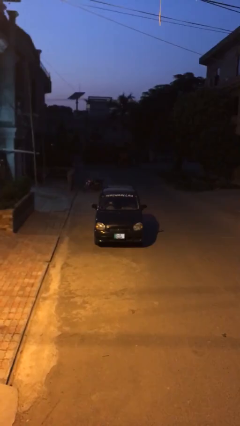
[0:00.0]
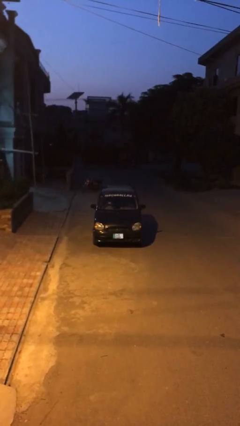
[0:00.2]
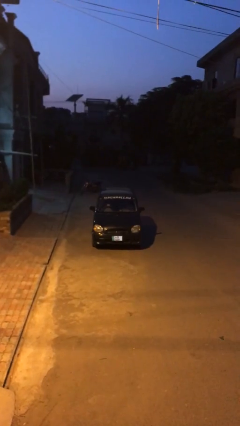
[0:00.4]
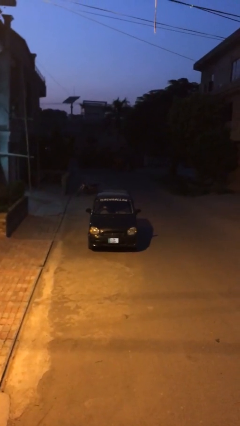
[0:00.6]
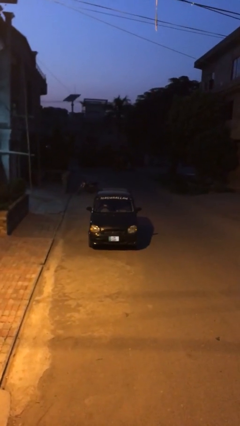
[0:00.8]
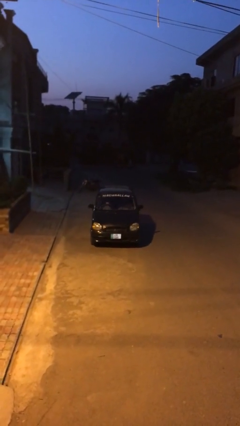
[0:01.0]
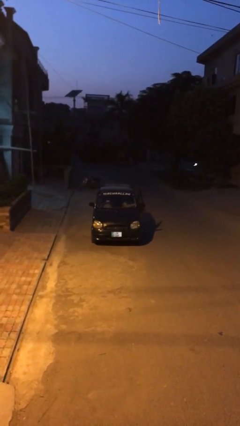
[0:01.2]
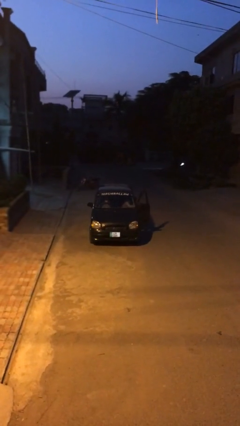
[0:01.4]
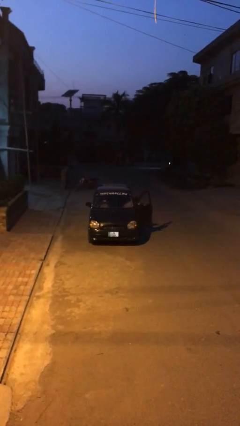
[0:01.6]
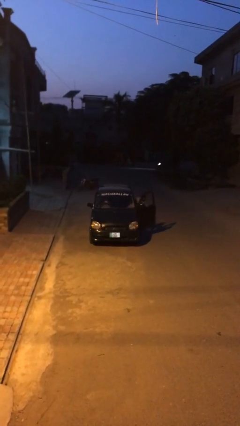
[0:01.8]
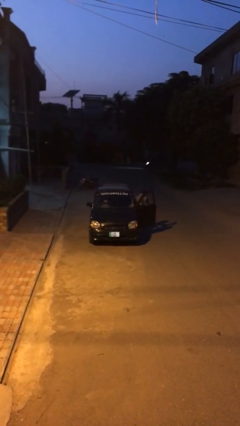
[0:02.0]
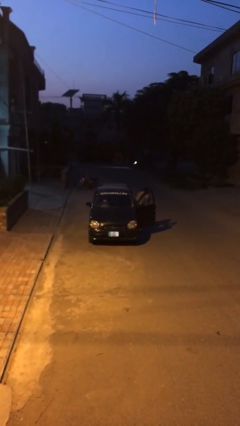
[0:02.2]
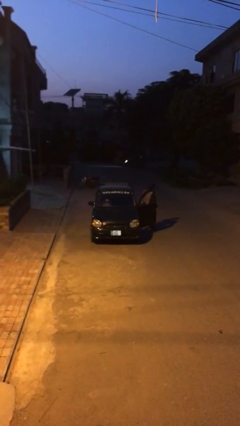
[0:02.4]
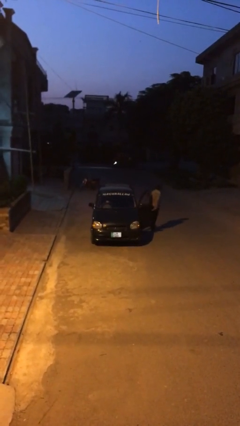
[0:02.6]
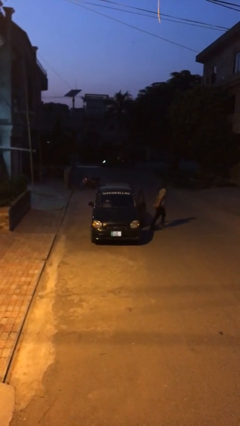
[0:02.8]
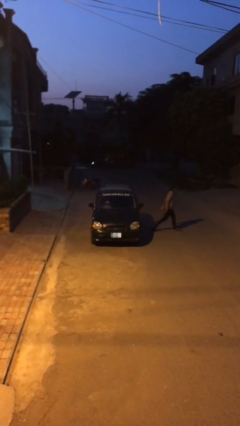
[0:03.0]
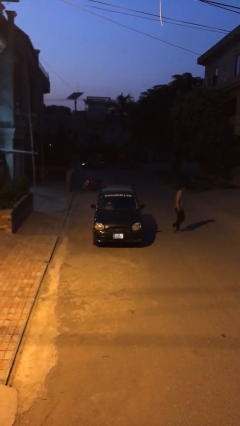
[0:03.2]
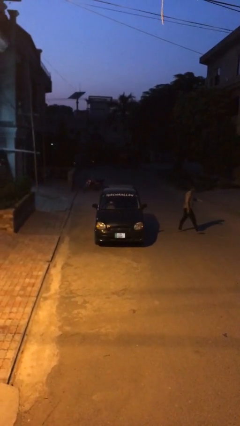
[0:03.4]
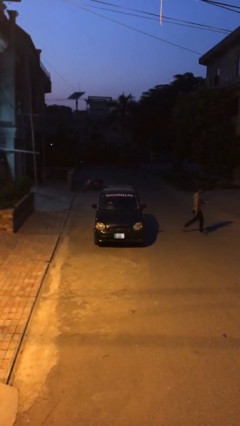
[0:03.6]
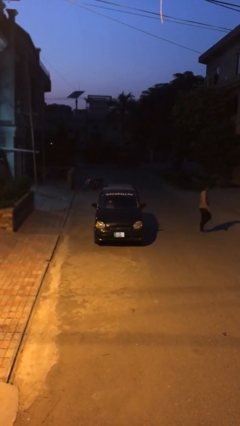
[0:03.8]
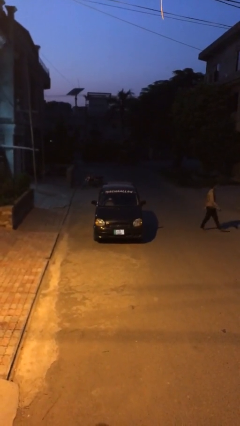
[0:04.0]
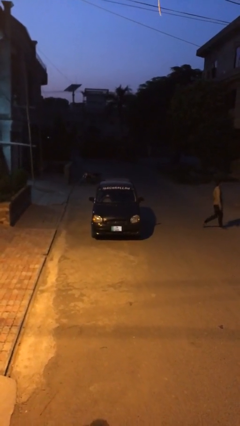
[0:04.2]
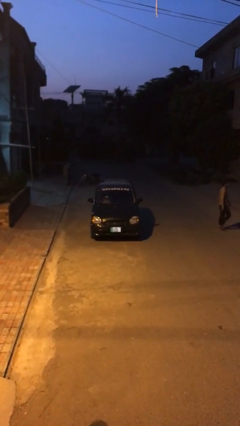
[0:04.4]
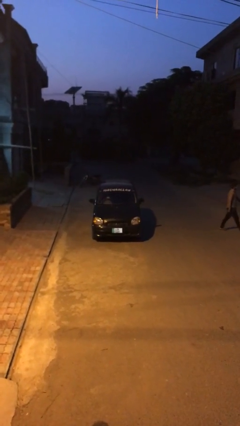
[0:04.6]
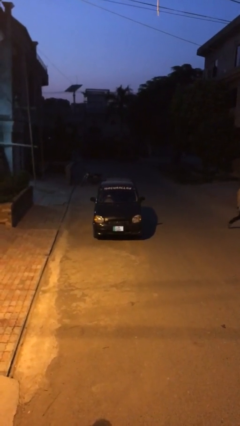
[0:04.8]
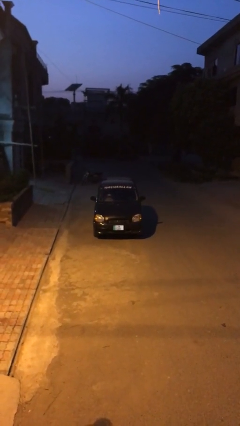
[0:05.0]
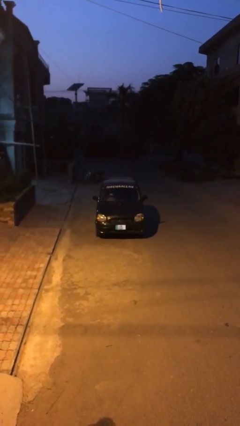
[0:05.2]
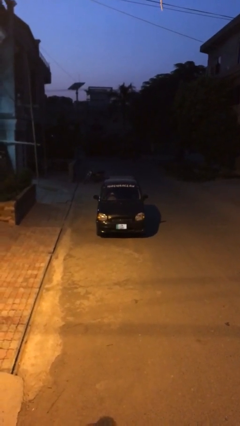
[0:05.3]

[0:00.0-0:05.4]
car drops off person

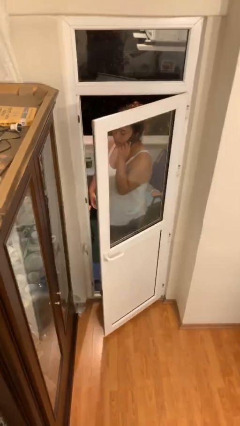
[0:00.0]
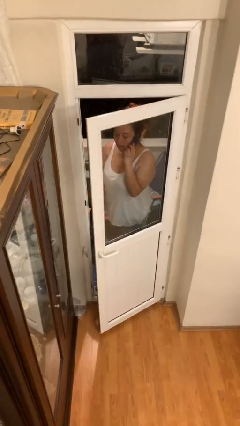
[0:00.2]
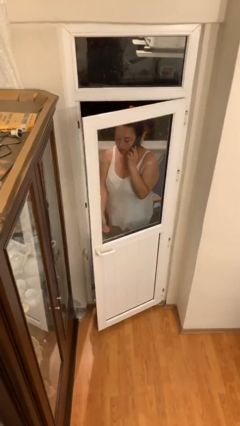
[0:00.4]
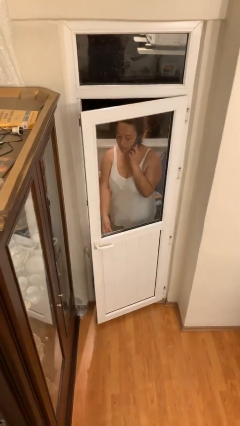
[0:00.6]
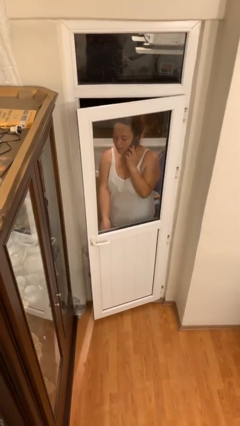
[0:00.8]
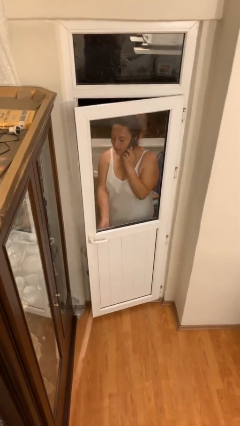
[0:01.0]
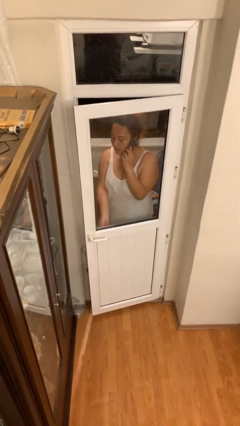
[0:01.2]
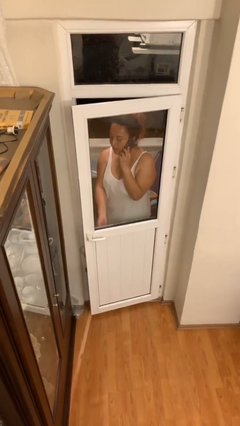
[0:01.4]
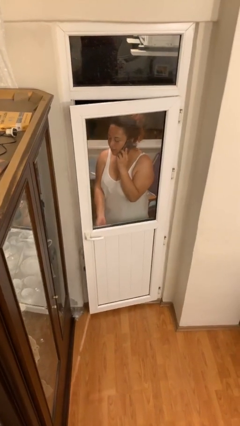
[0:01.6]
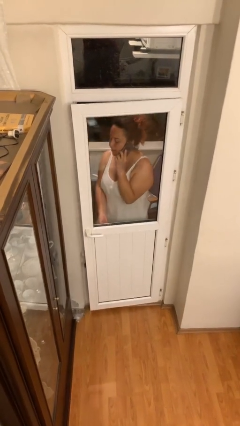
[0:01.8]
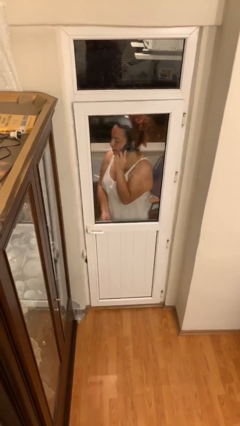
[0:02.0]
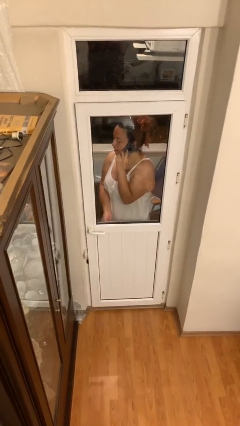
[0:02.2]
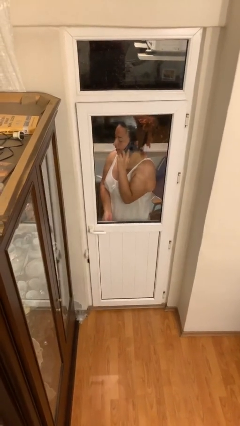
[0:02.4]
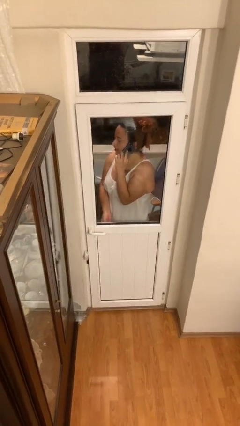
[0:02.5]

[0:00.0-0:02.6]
person closes facility door

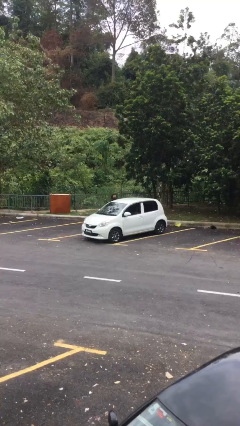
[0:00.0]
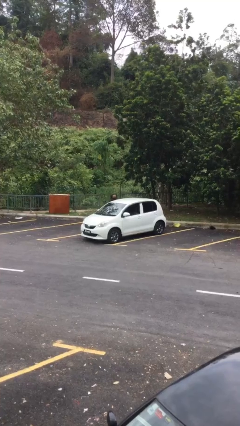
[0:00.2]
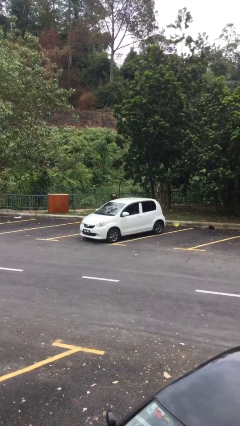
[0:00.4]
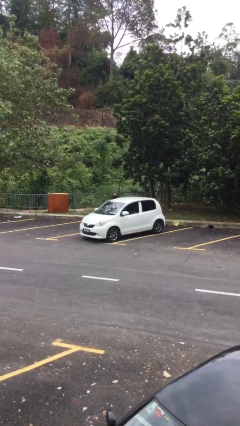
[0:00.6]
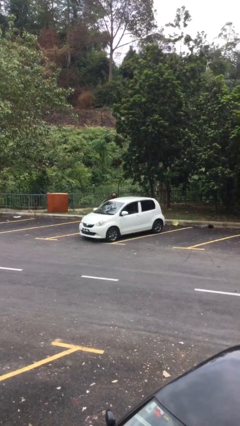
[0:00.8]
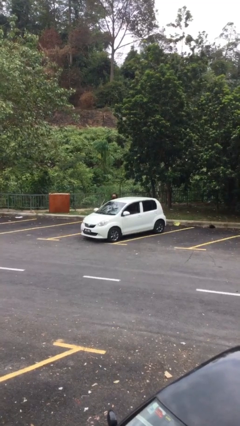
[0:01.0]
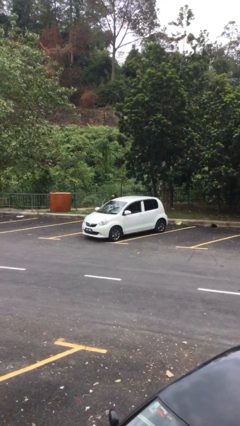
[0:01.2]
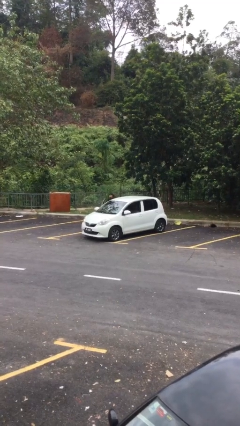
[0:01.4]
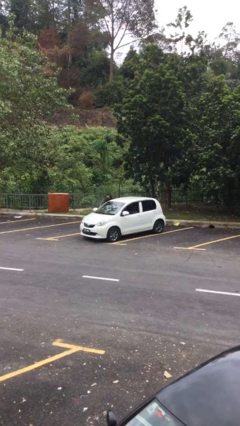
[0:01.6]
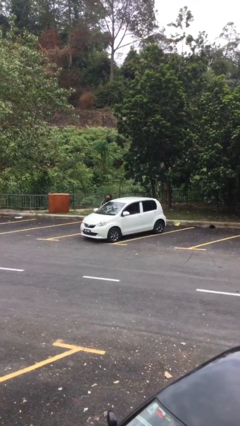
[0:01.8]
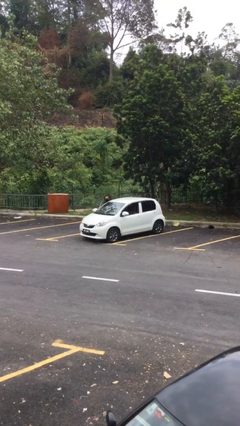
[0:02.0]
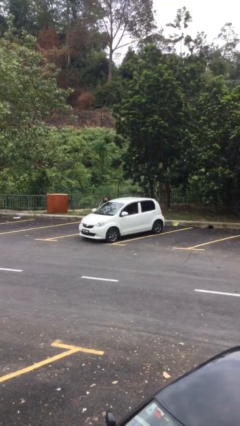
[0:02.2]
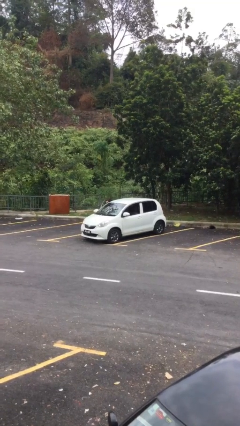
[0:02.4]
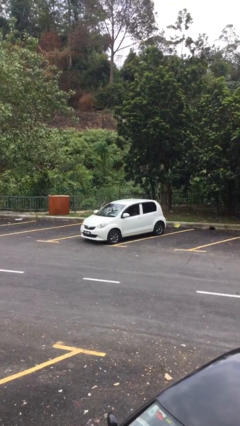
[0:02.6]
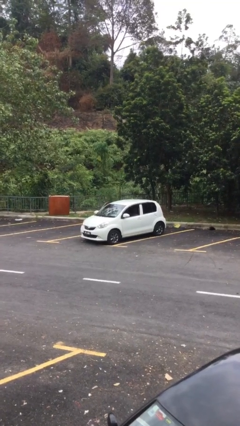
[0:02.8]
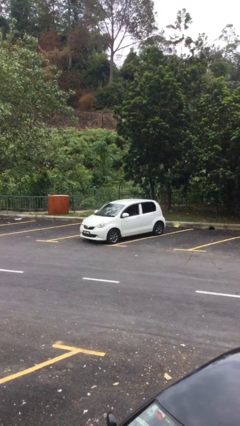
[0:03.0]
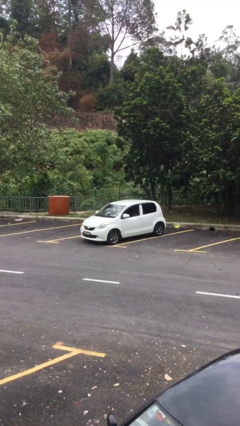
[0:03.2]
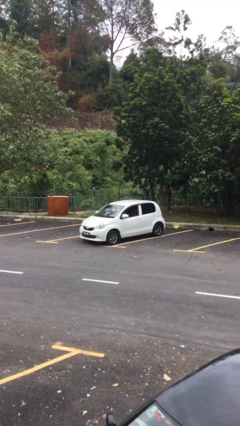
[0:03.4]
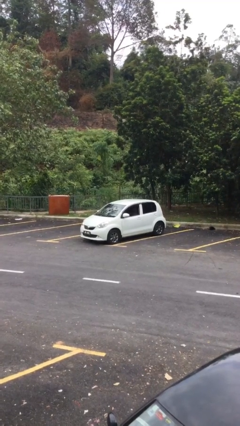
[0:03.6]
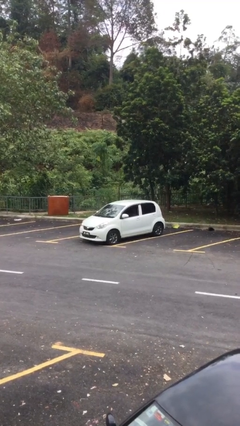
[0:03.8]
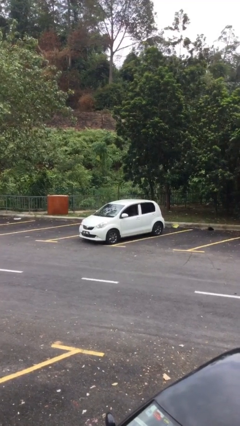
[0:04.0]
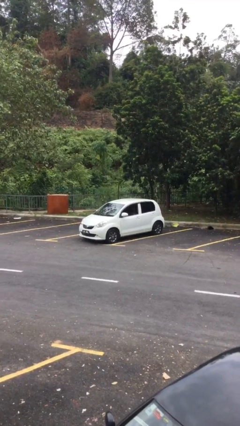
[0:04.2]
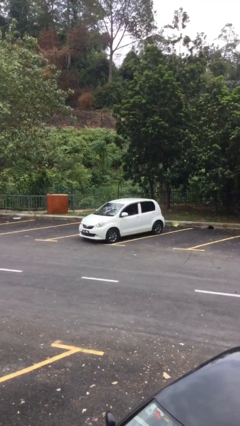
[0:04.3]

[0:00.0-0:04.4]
car picks up person

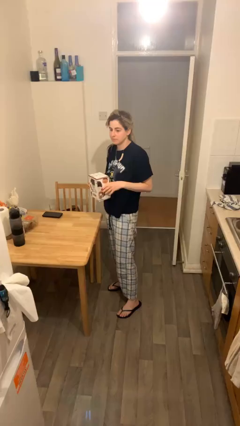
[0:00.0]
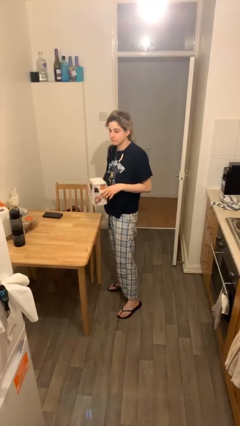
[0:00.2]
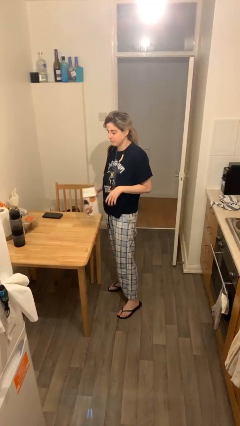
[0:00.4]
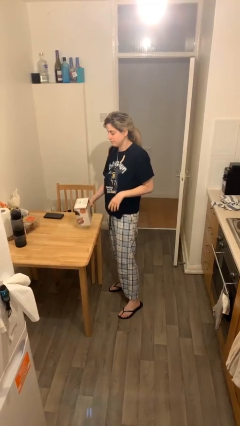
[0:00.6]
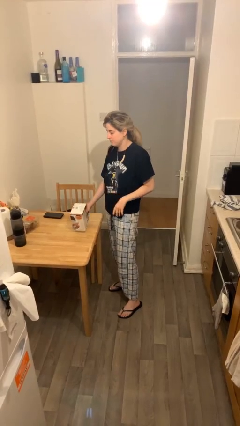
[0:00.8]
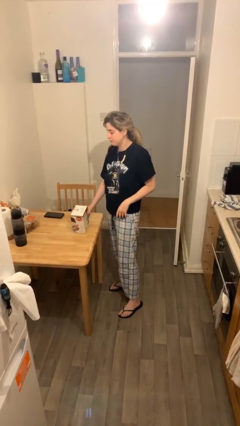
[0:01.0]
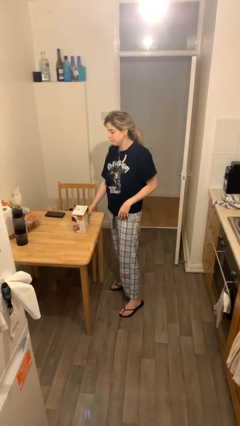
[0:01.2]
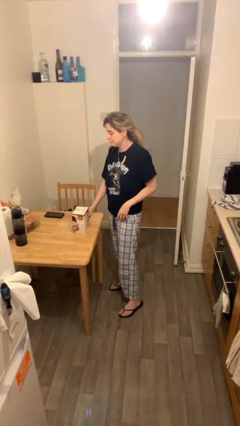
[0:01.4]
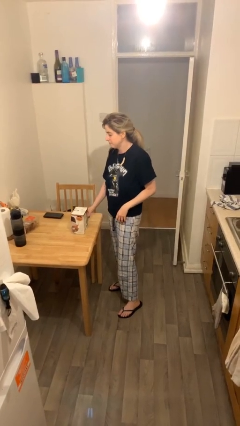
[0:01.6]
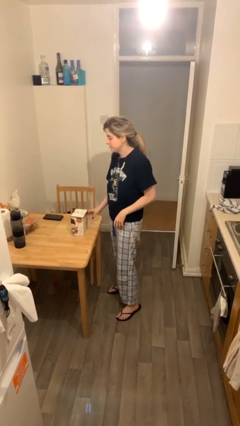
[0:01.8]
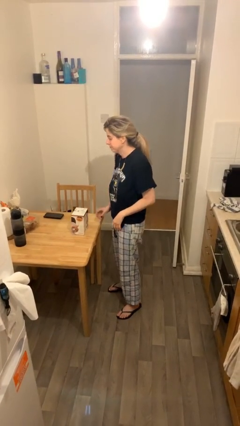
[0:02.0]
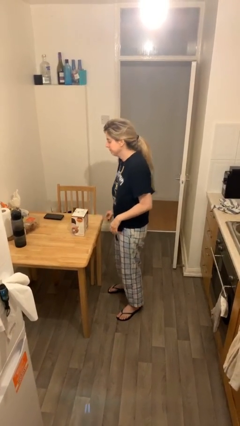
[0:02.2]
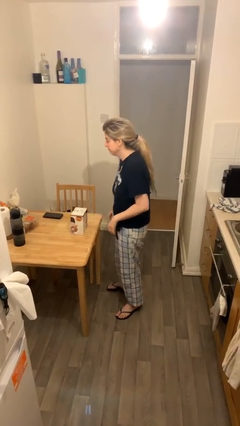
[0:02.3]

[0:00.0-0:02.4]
person puts down object on table

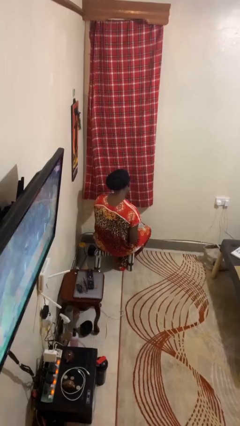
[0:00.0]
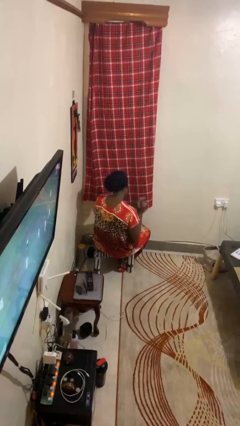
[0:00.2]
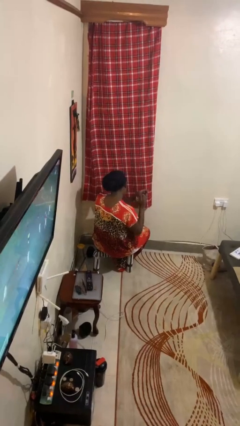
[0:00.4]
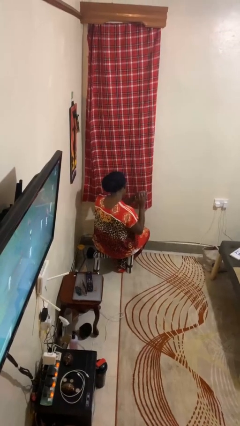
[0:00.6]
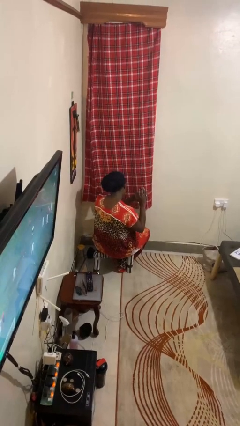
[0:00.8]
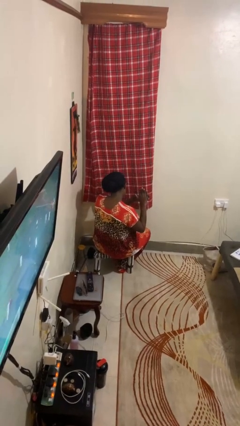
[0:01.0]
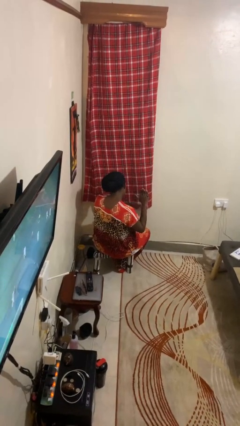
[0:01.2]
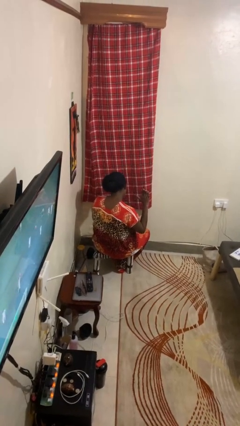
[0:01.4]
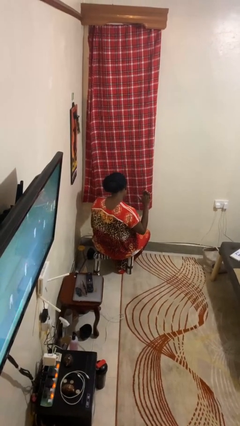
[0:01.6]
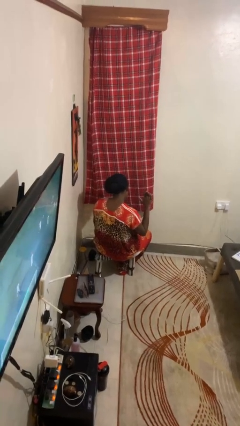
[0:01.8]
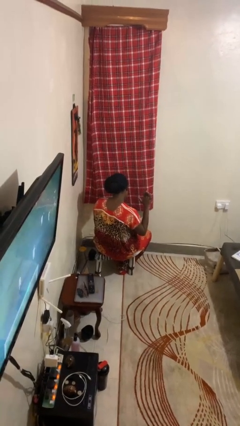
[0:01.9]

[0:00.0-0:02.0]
person puts on ring

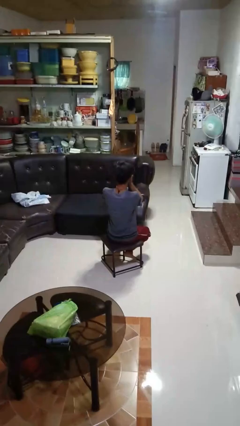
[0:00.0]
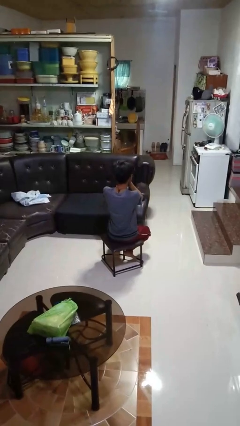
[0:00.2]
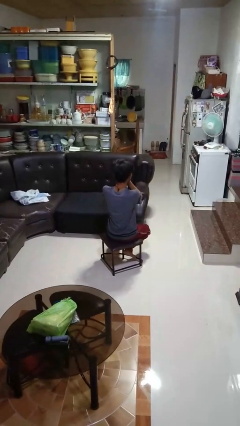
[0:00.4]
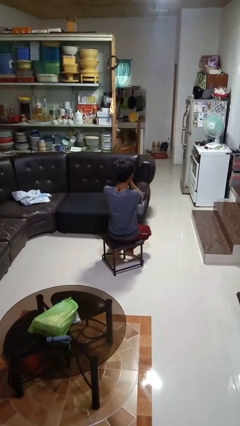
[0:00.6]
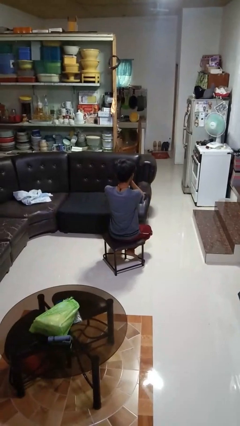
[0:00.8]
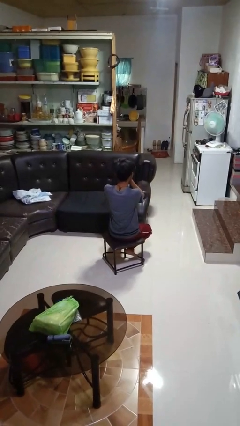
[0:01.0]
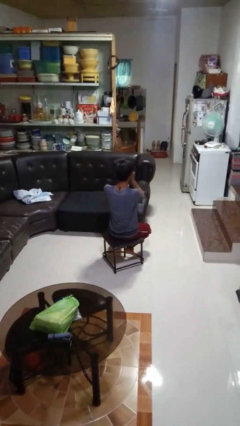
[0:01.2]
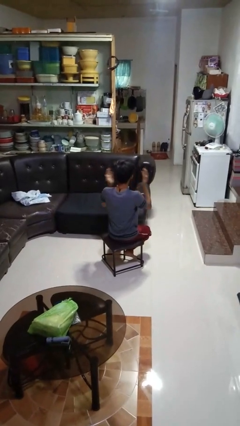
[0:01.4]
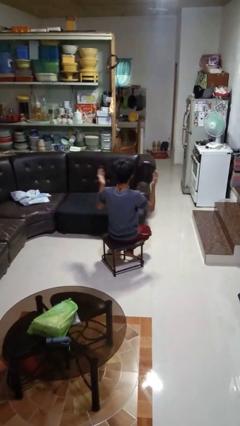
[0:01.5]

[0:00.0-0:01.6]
person covers face with hands
